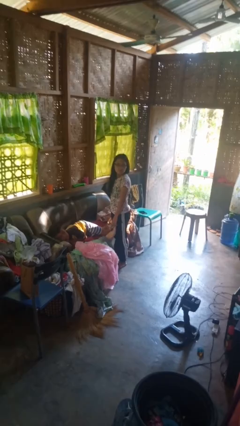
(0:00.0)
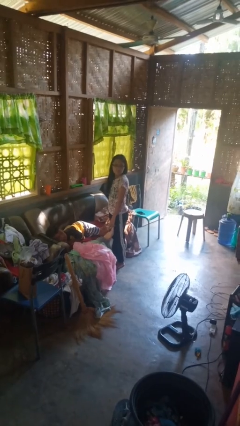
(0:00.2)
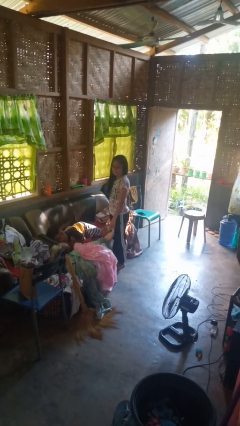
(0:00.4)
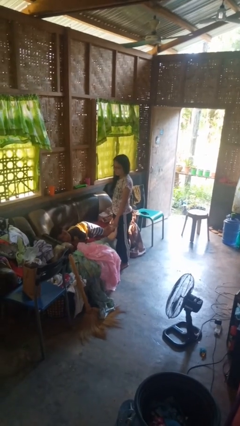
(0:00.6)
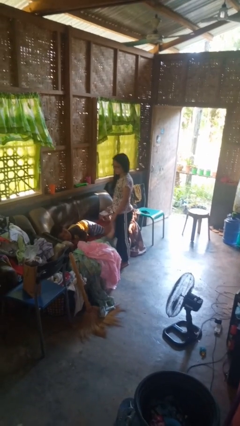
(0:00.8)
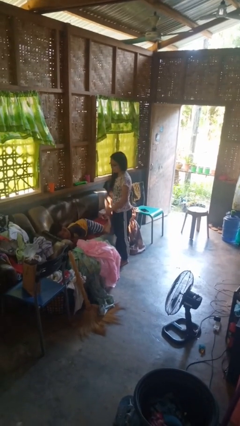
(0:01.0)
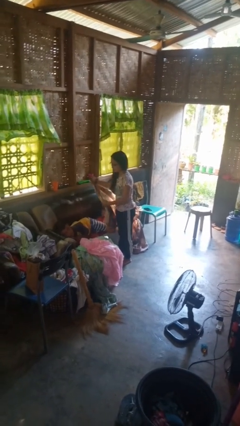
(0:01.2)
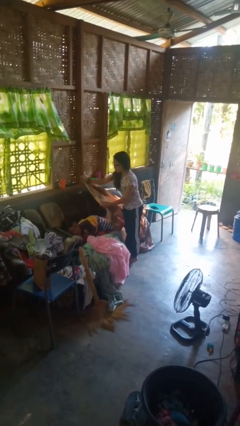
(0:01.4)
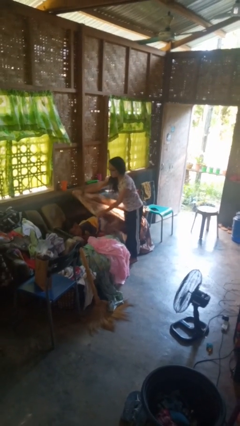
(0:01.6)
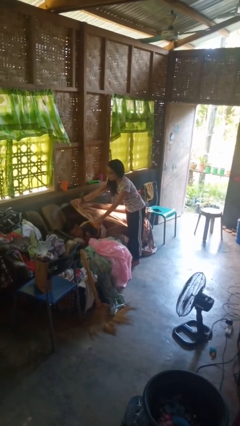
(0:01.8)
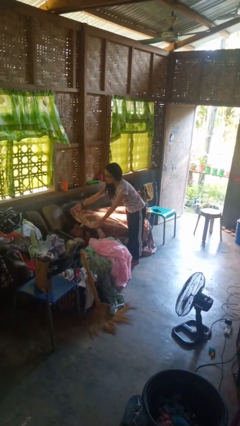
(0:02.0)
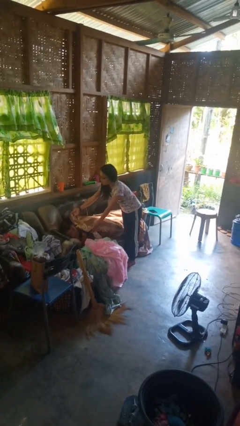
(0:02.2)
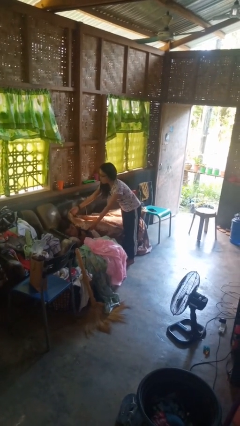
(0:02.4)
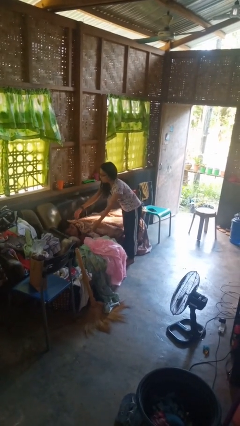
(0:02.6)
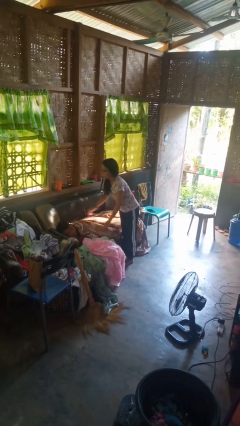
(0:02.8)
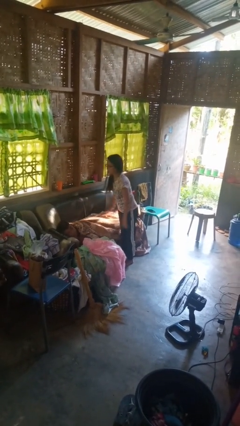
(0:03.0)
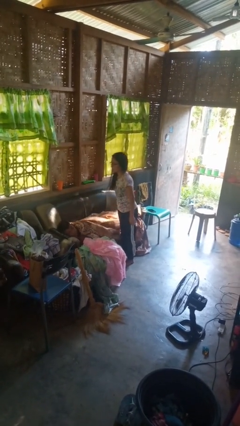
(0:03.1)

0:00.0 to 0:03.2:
person covers friend with blanket

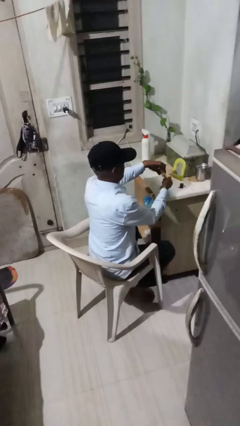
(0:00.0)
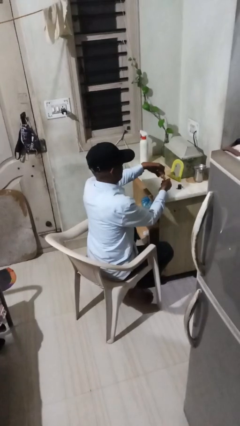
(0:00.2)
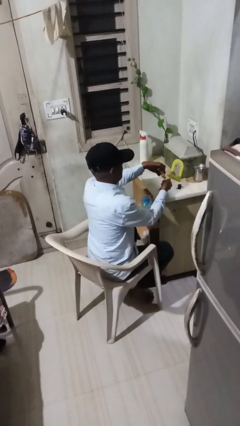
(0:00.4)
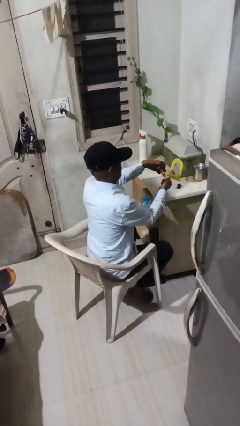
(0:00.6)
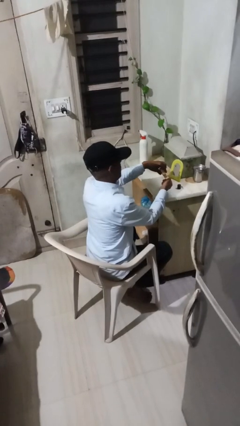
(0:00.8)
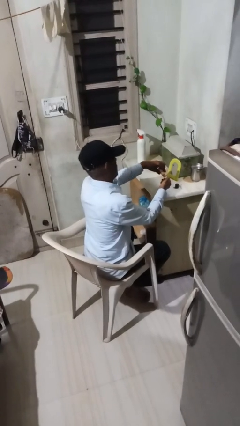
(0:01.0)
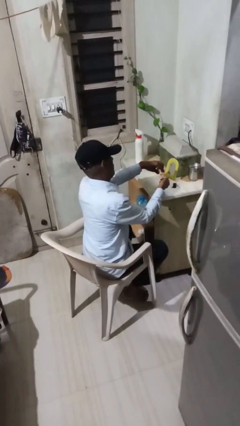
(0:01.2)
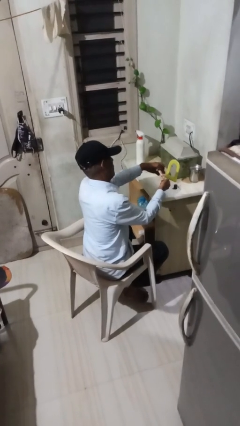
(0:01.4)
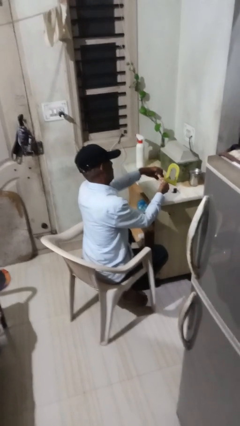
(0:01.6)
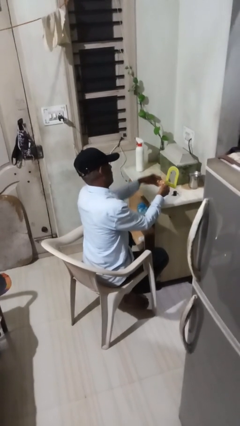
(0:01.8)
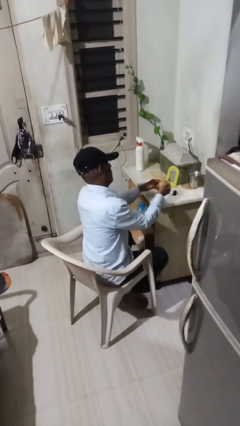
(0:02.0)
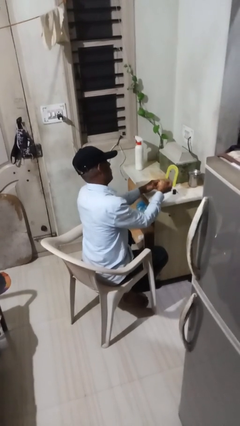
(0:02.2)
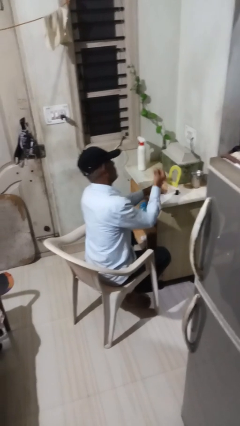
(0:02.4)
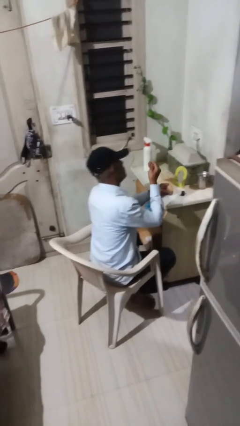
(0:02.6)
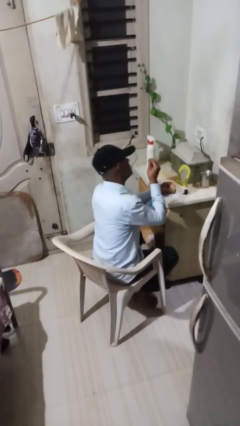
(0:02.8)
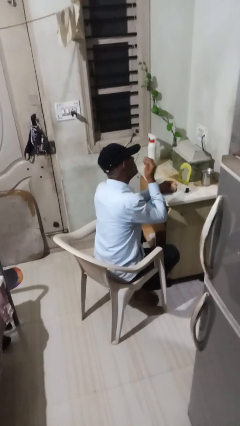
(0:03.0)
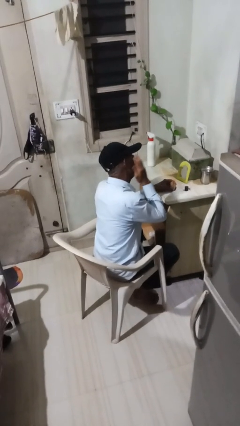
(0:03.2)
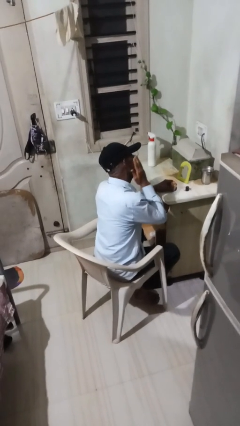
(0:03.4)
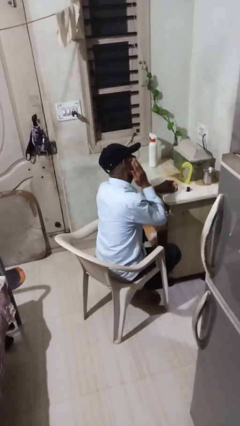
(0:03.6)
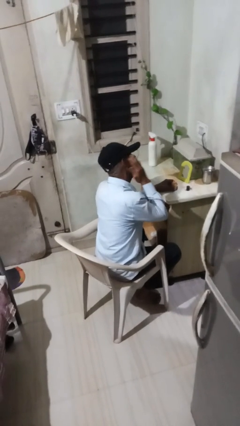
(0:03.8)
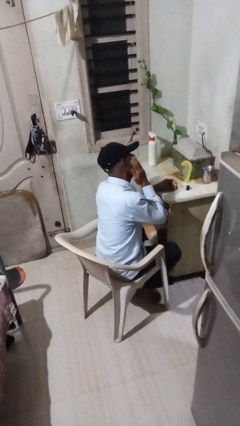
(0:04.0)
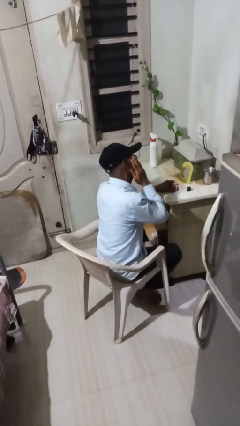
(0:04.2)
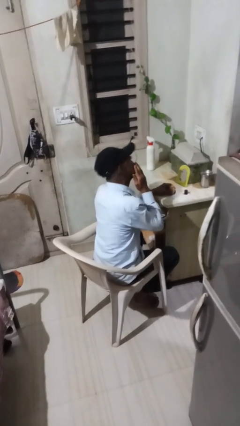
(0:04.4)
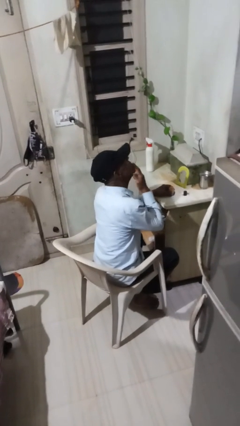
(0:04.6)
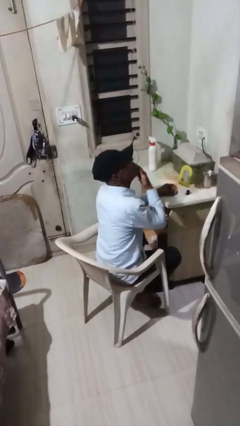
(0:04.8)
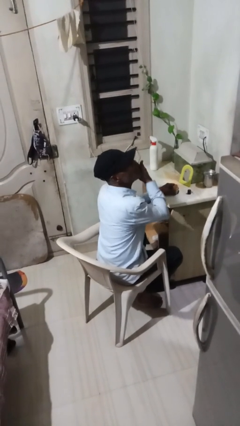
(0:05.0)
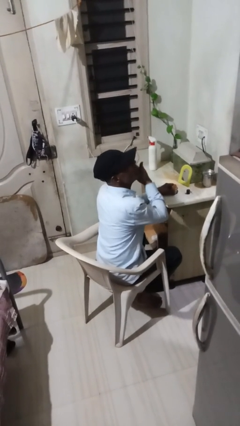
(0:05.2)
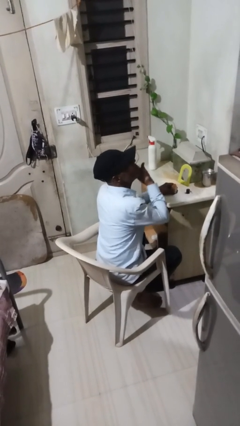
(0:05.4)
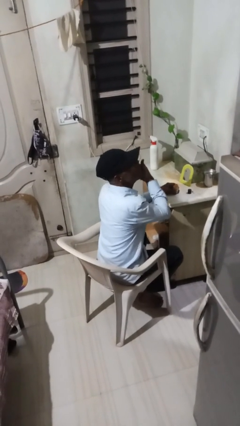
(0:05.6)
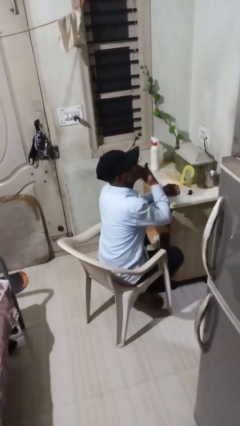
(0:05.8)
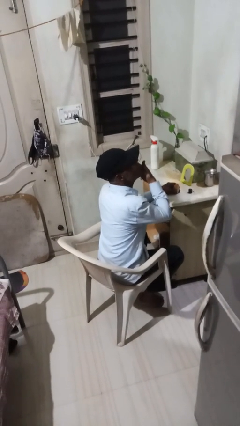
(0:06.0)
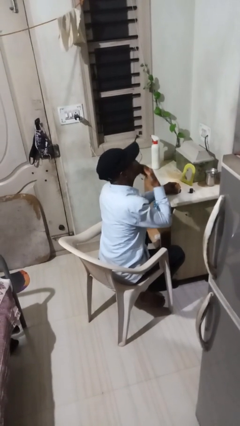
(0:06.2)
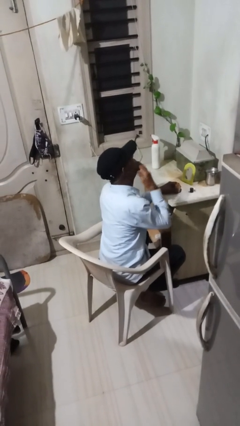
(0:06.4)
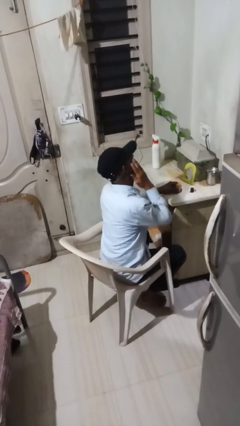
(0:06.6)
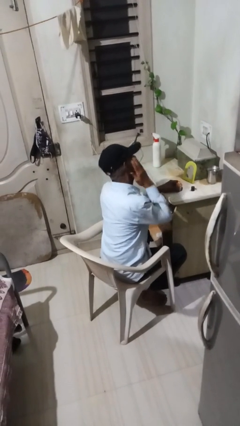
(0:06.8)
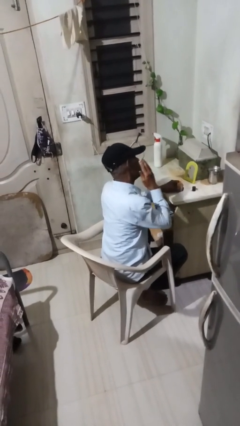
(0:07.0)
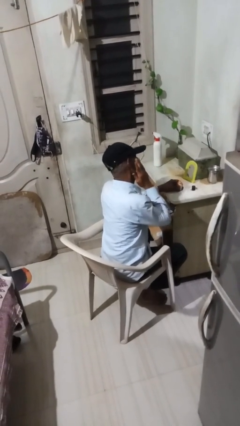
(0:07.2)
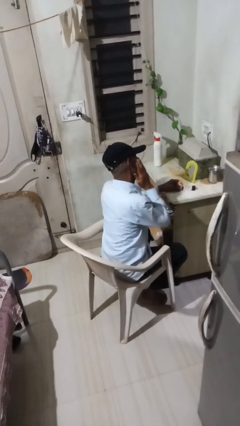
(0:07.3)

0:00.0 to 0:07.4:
person applies foundation makeup

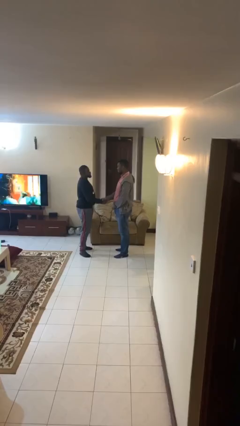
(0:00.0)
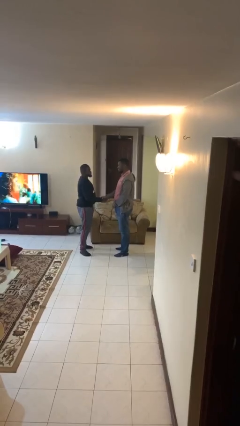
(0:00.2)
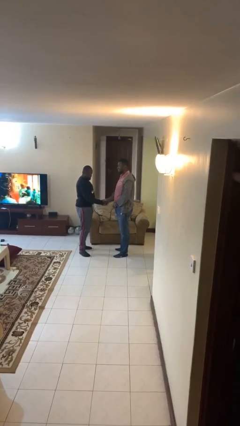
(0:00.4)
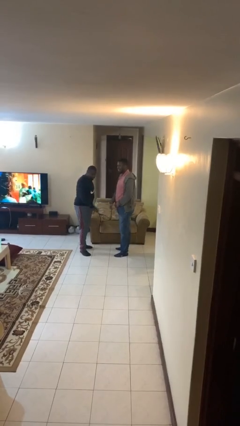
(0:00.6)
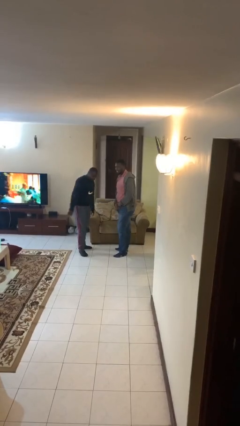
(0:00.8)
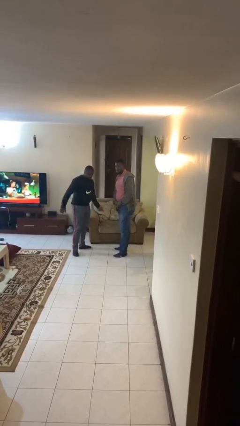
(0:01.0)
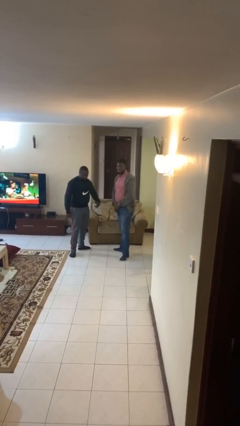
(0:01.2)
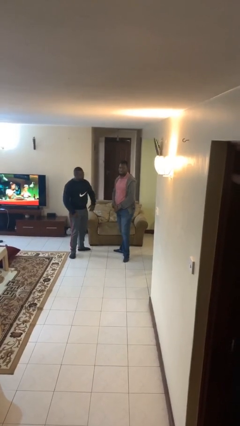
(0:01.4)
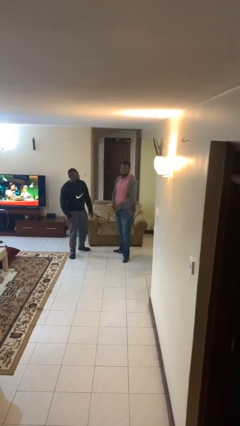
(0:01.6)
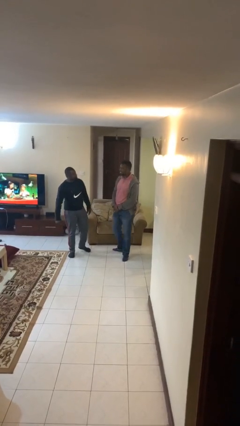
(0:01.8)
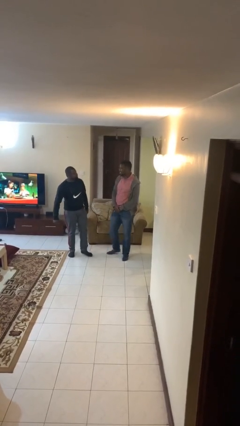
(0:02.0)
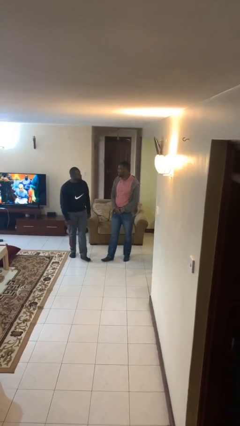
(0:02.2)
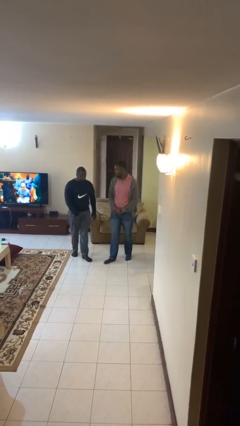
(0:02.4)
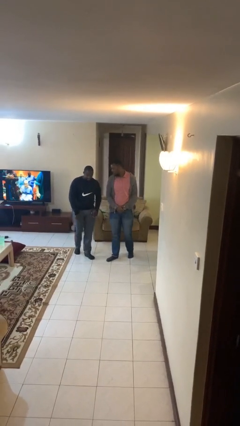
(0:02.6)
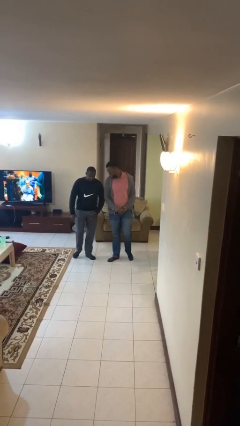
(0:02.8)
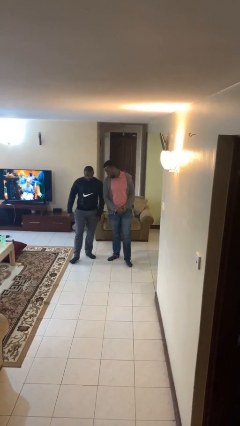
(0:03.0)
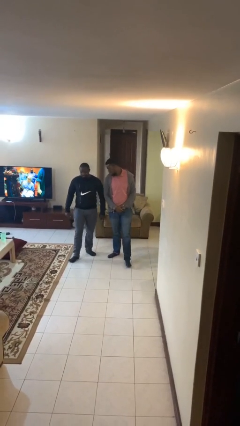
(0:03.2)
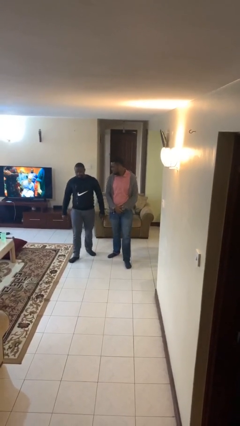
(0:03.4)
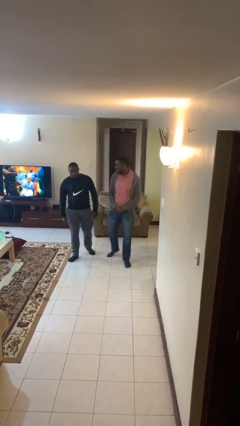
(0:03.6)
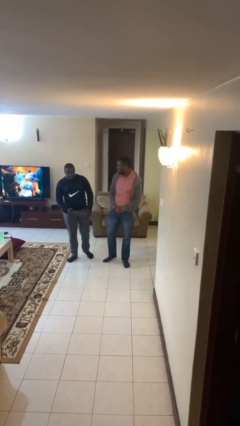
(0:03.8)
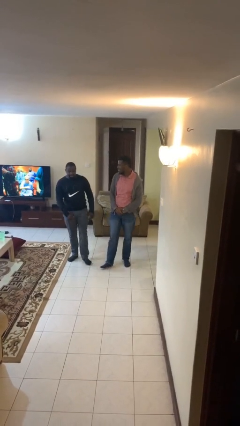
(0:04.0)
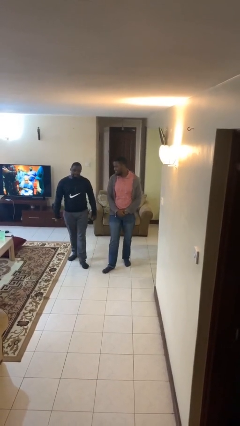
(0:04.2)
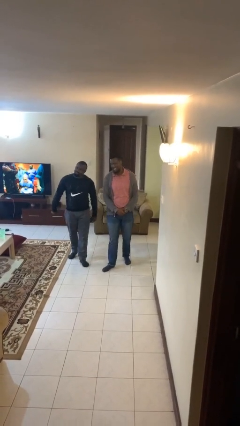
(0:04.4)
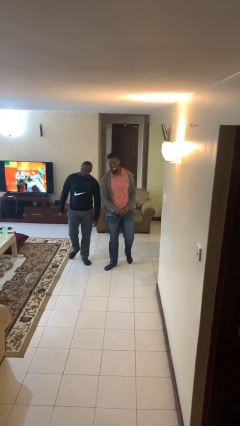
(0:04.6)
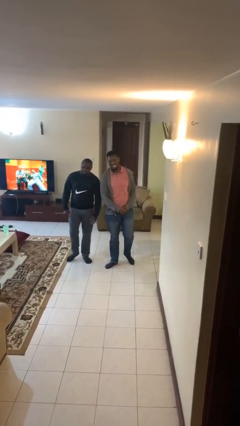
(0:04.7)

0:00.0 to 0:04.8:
person talks to person

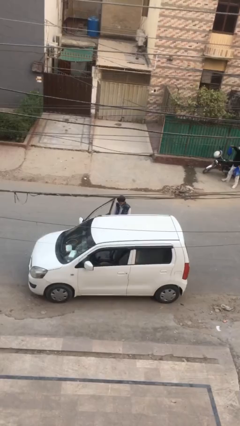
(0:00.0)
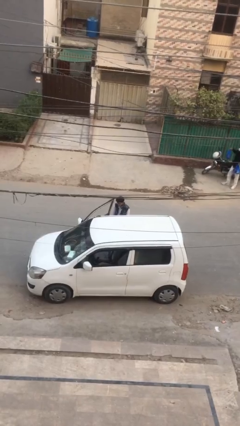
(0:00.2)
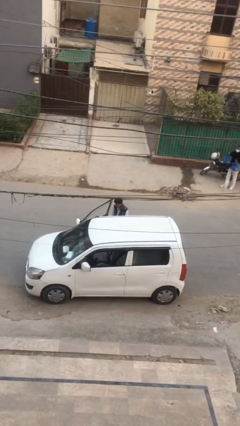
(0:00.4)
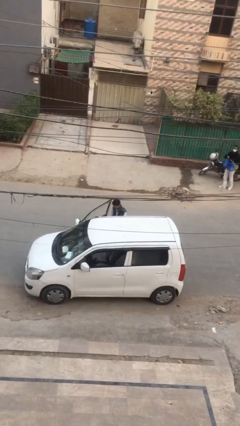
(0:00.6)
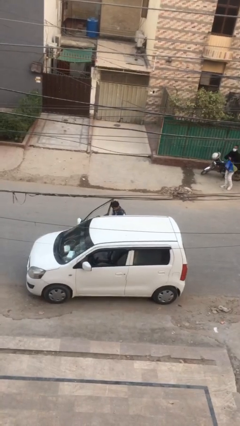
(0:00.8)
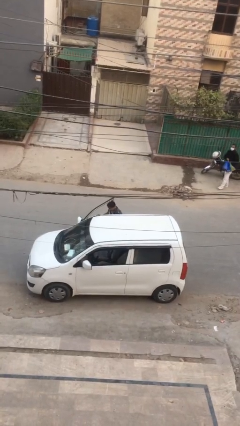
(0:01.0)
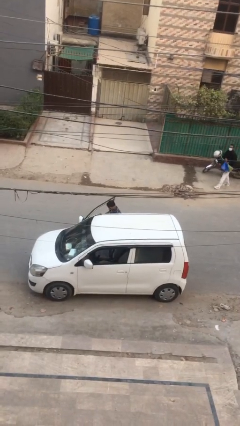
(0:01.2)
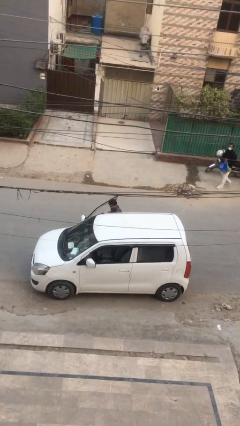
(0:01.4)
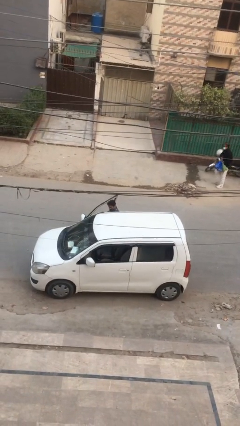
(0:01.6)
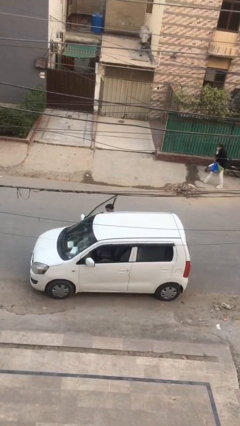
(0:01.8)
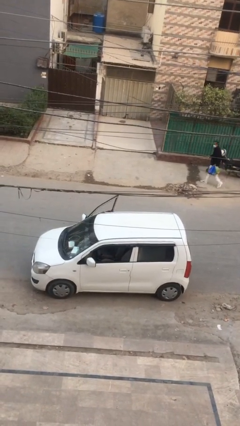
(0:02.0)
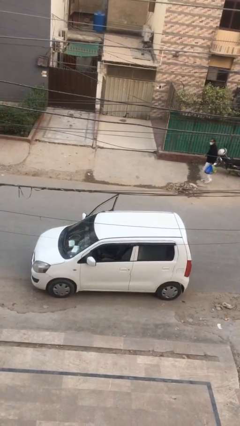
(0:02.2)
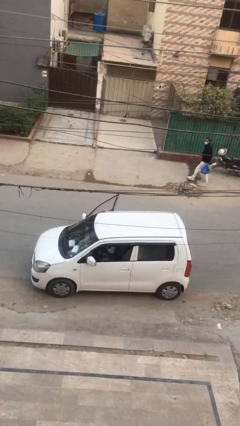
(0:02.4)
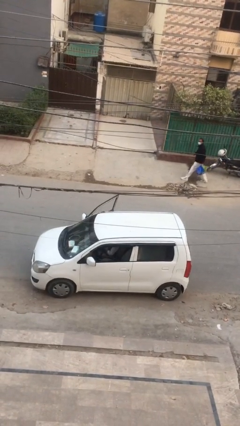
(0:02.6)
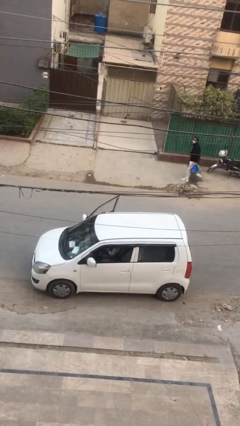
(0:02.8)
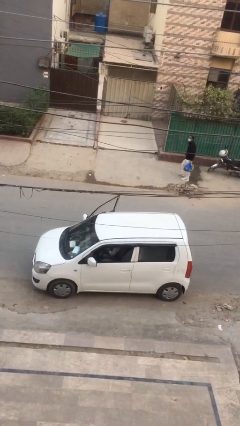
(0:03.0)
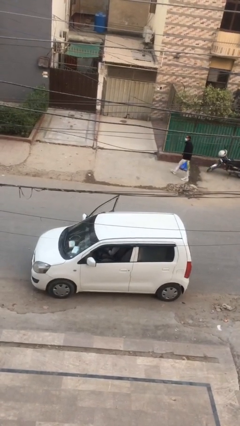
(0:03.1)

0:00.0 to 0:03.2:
person enters car
